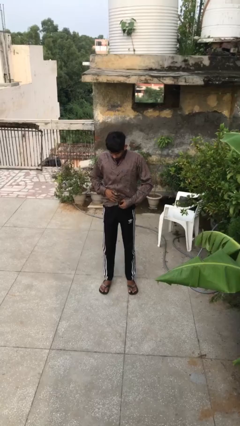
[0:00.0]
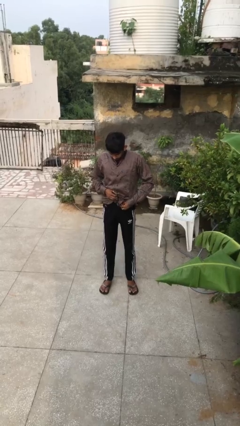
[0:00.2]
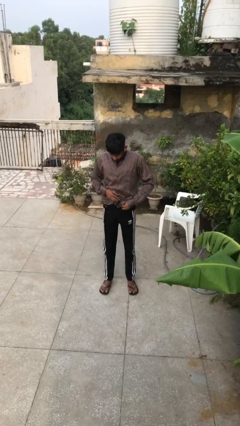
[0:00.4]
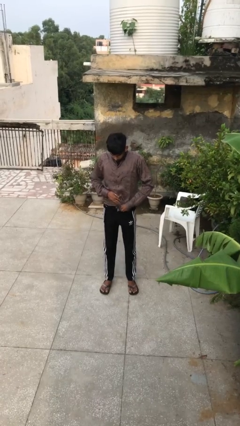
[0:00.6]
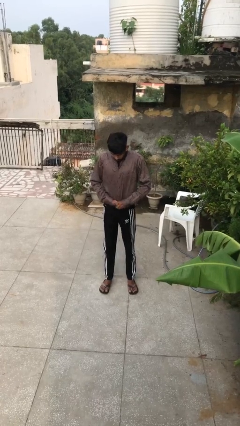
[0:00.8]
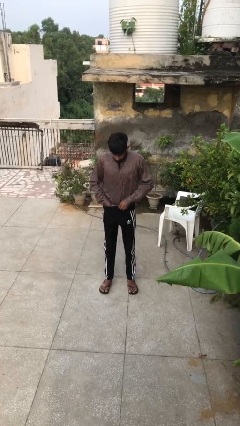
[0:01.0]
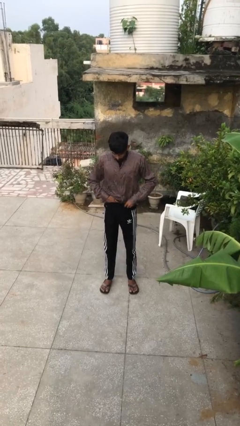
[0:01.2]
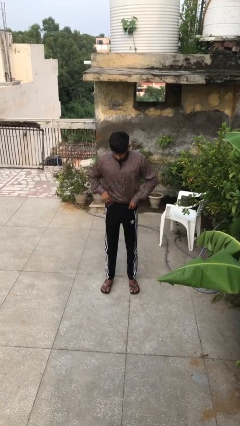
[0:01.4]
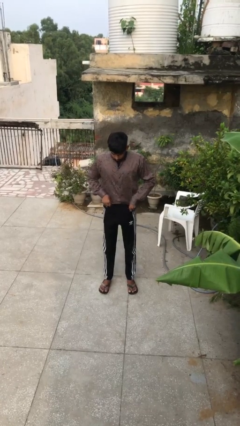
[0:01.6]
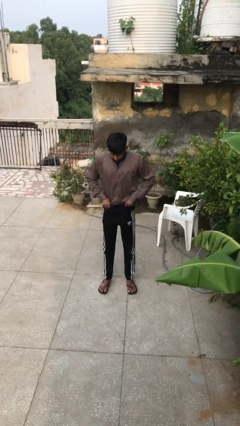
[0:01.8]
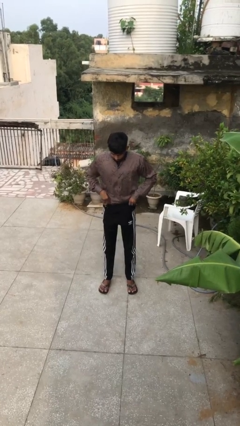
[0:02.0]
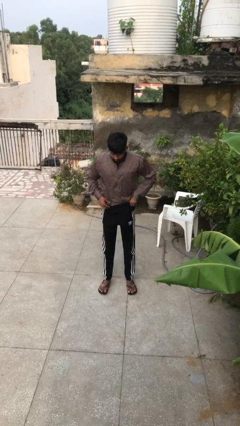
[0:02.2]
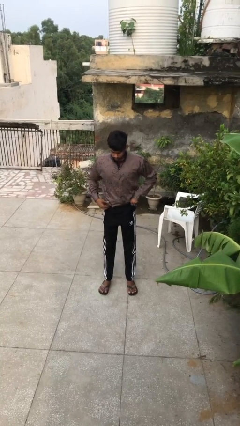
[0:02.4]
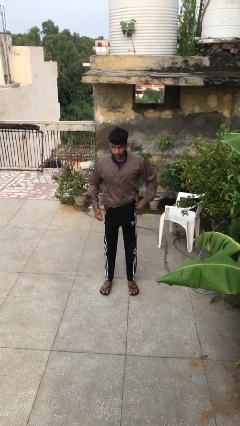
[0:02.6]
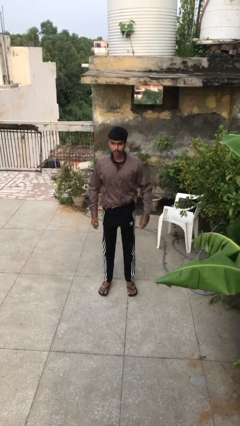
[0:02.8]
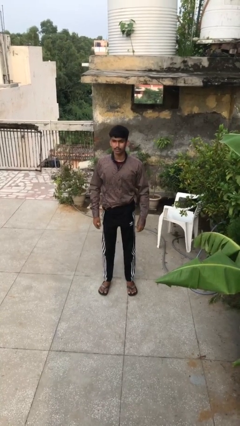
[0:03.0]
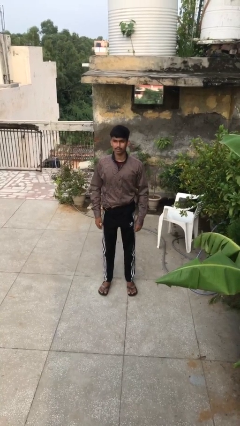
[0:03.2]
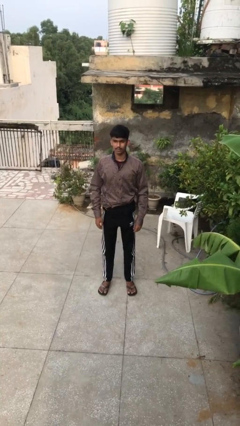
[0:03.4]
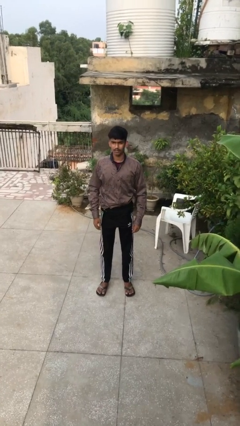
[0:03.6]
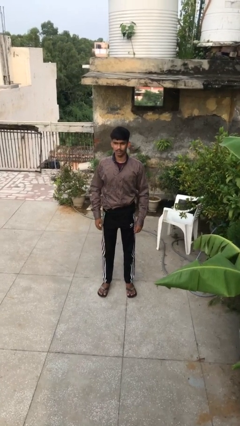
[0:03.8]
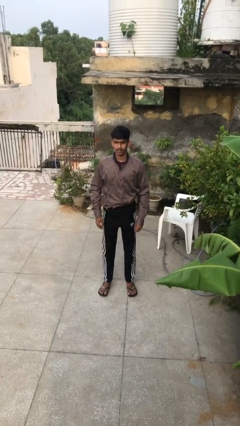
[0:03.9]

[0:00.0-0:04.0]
person tucks in shirt

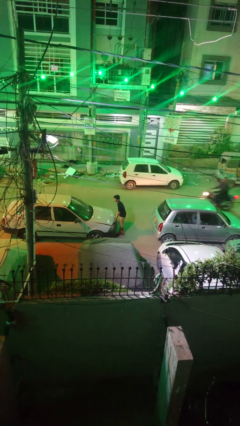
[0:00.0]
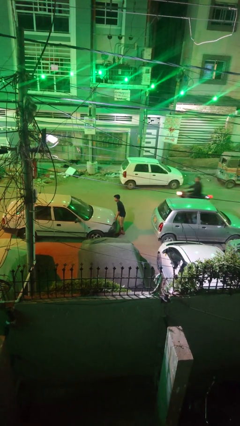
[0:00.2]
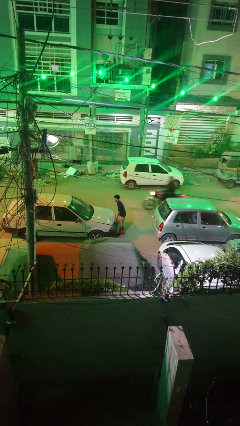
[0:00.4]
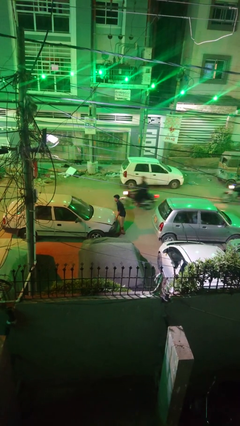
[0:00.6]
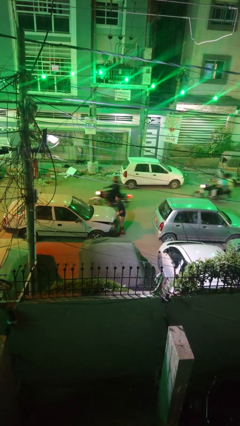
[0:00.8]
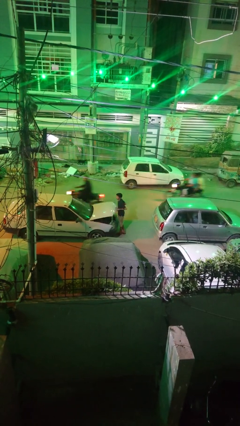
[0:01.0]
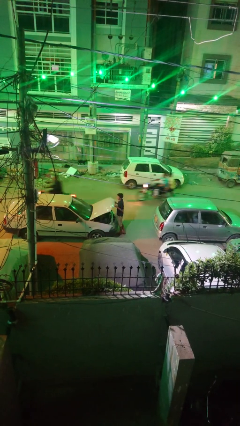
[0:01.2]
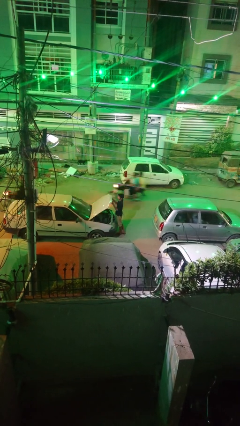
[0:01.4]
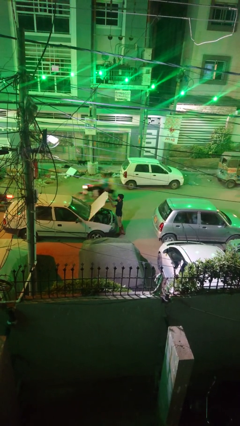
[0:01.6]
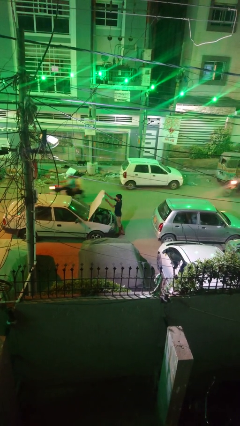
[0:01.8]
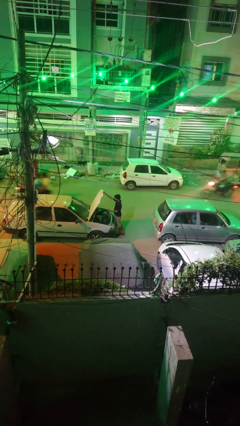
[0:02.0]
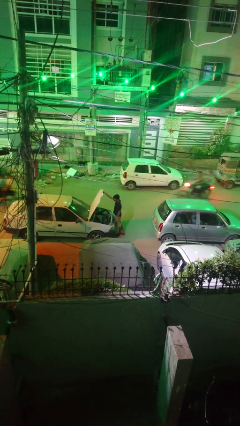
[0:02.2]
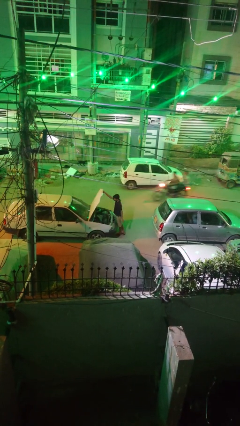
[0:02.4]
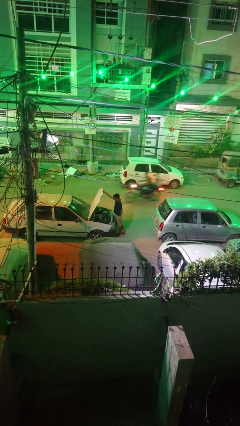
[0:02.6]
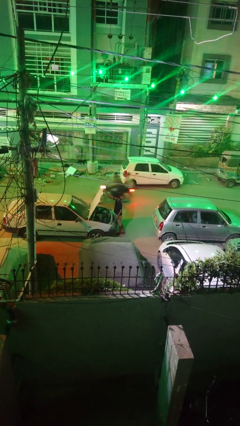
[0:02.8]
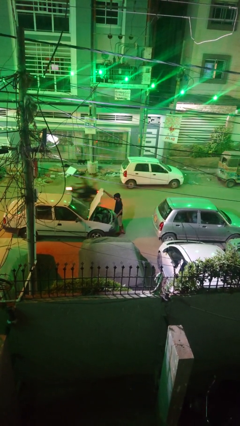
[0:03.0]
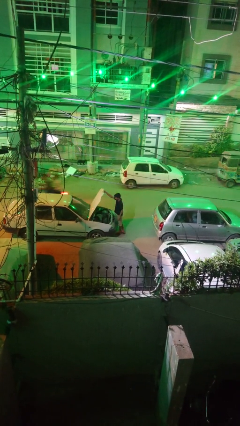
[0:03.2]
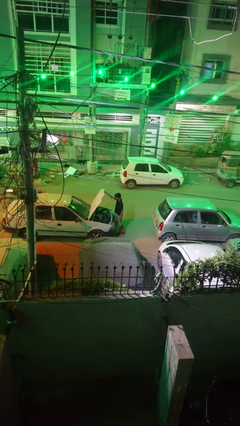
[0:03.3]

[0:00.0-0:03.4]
person opens car hood

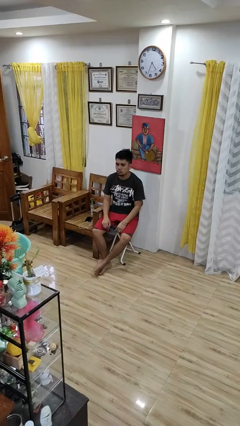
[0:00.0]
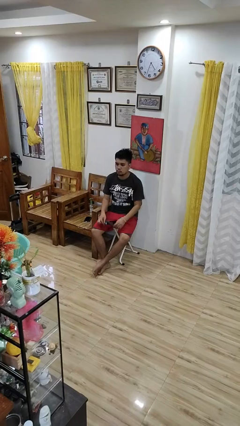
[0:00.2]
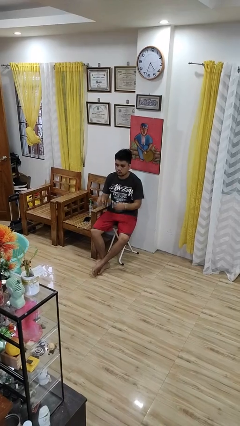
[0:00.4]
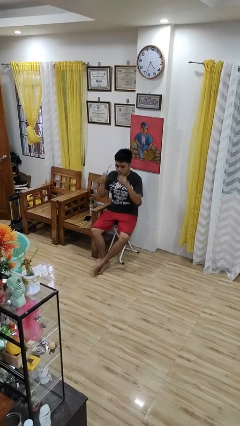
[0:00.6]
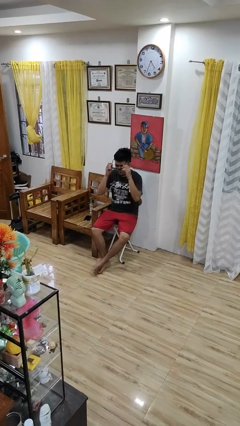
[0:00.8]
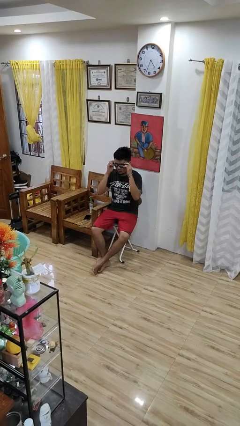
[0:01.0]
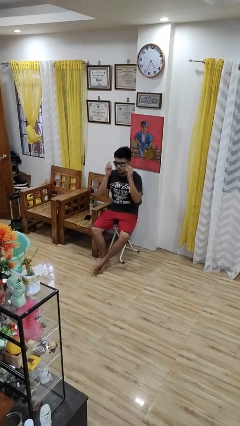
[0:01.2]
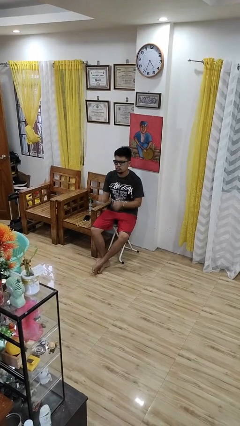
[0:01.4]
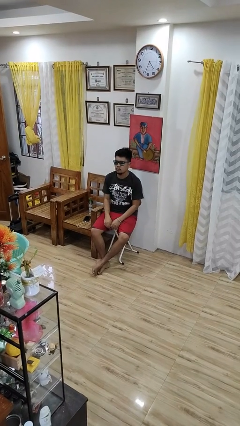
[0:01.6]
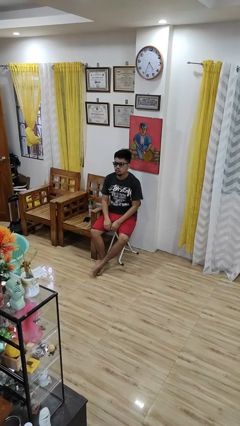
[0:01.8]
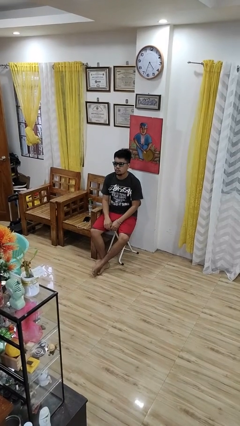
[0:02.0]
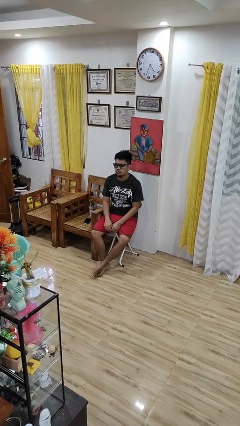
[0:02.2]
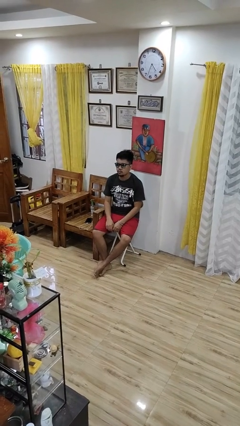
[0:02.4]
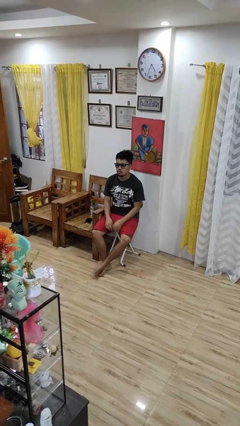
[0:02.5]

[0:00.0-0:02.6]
person puts on sunglasses

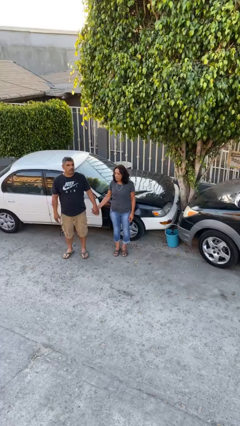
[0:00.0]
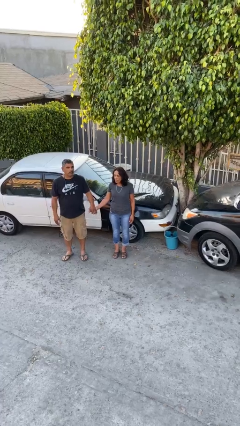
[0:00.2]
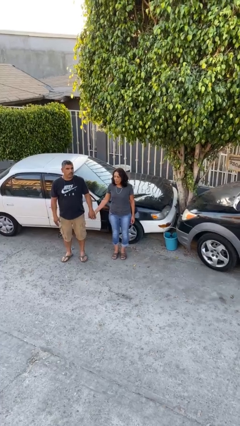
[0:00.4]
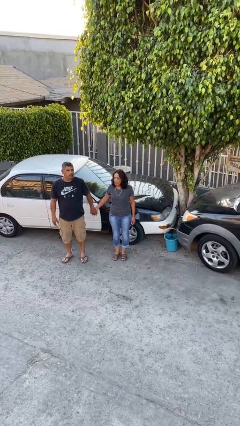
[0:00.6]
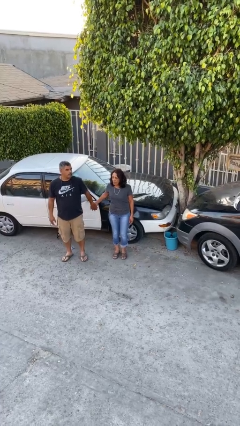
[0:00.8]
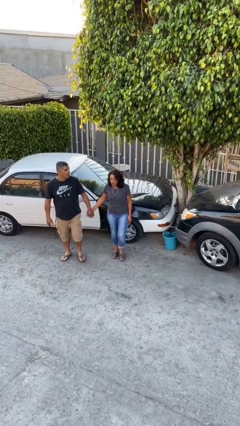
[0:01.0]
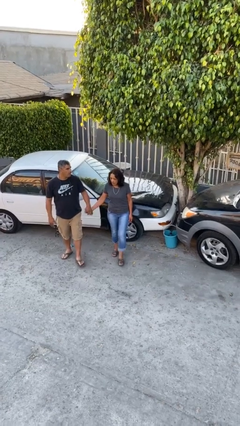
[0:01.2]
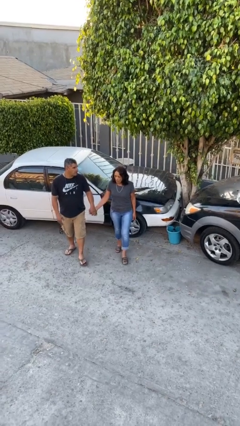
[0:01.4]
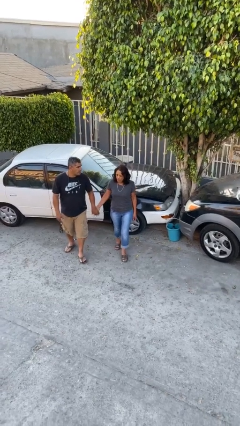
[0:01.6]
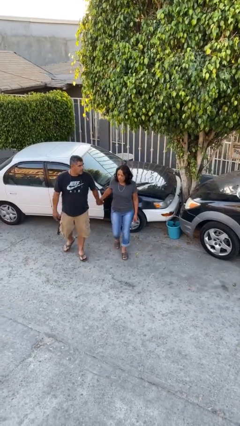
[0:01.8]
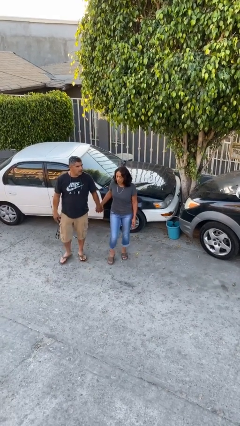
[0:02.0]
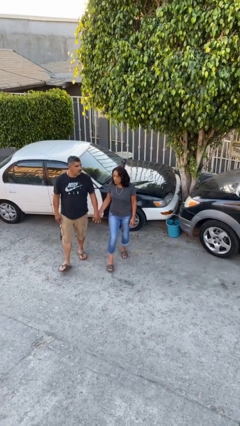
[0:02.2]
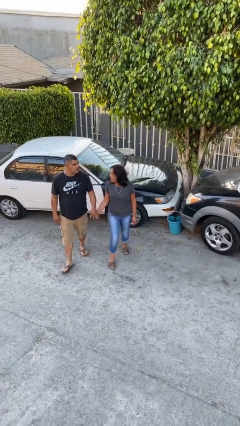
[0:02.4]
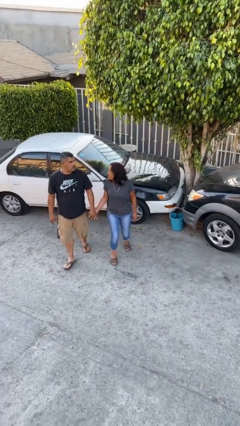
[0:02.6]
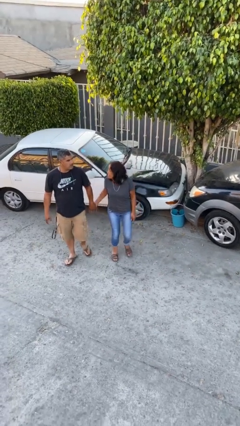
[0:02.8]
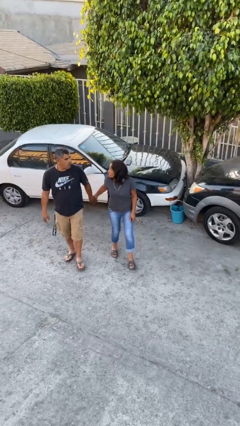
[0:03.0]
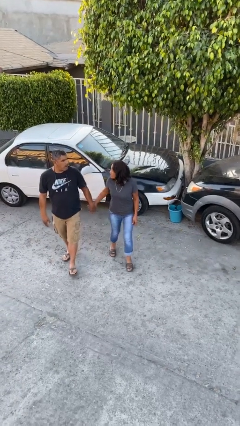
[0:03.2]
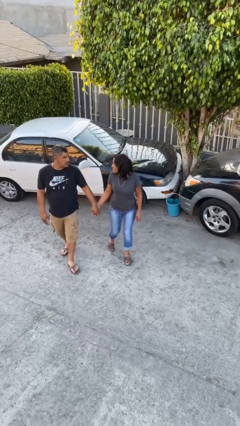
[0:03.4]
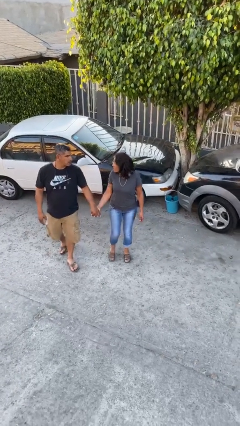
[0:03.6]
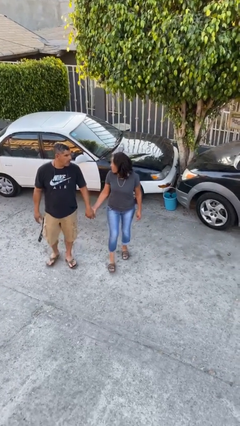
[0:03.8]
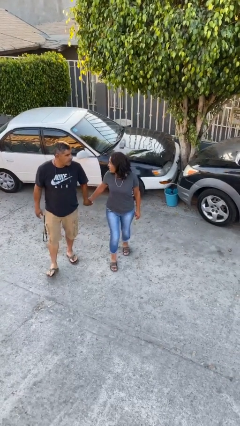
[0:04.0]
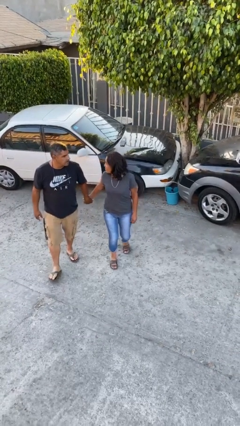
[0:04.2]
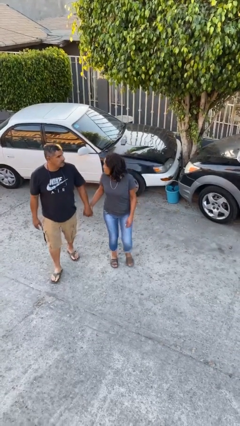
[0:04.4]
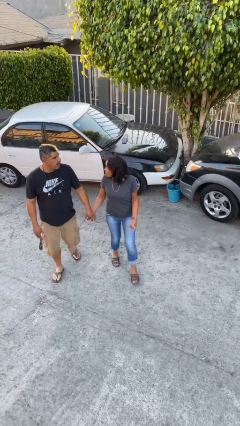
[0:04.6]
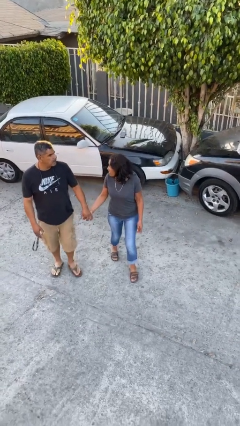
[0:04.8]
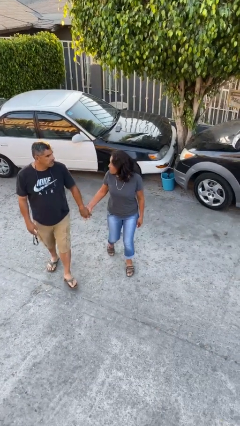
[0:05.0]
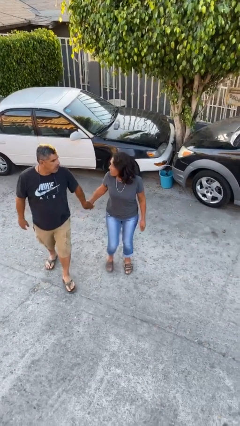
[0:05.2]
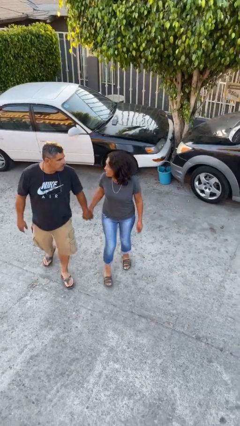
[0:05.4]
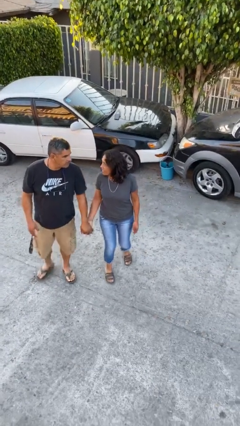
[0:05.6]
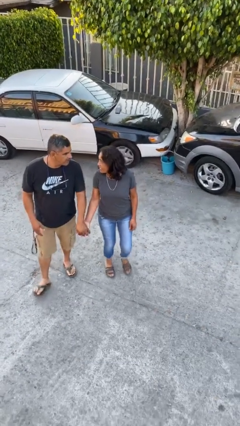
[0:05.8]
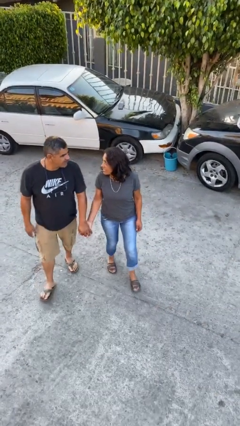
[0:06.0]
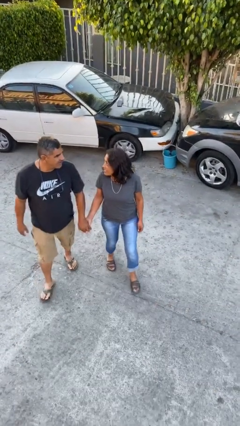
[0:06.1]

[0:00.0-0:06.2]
person holds hand

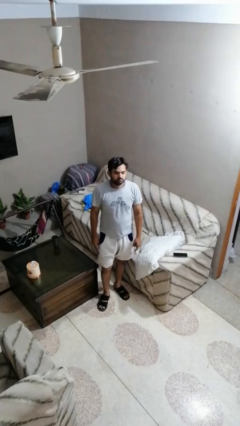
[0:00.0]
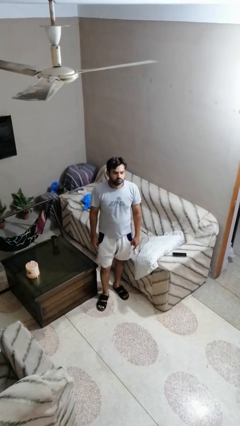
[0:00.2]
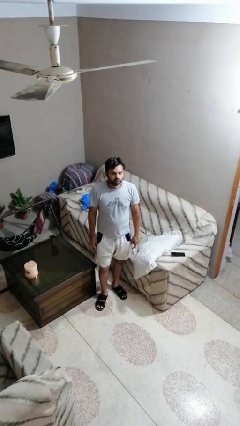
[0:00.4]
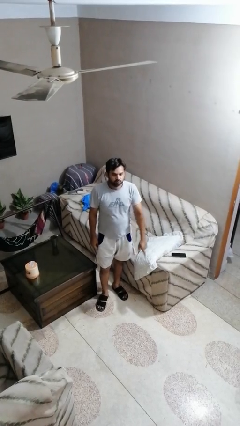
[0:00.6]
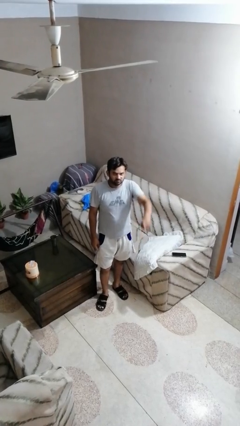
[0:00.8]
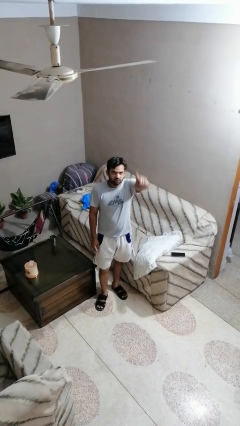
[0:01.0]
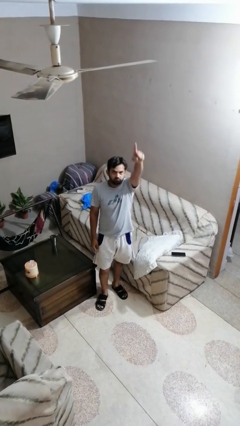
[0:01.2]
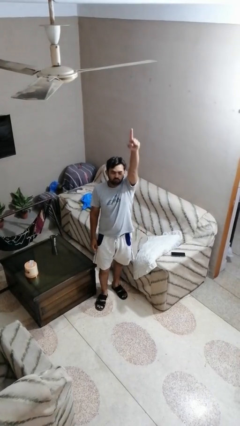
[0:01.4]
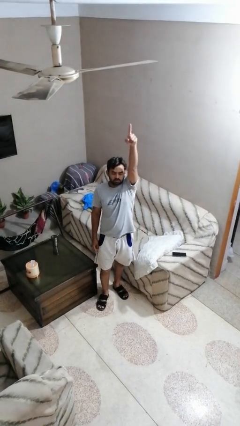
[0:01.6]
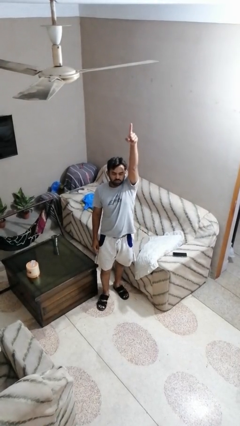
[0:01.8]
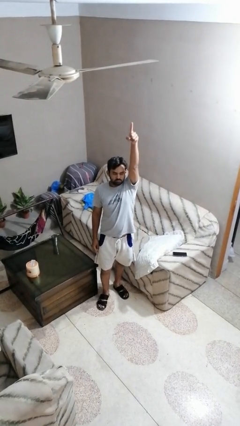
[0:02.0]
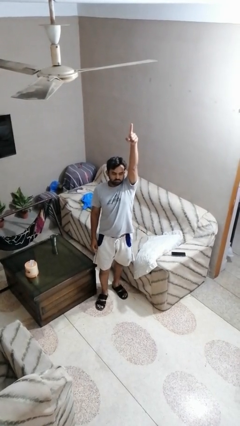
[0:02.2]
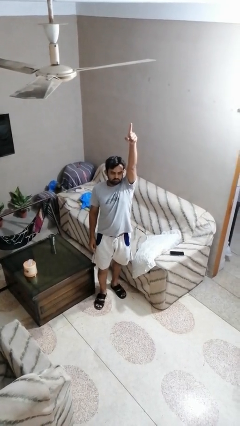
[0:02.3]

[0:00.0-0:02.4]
person gestures number one
